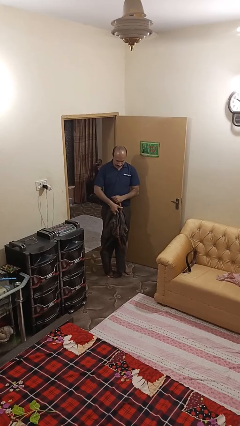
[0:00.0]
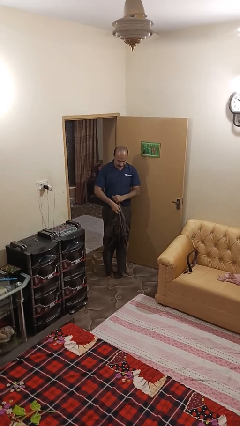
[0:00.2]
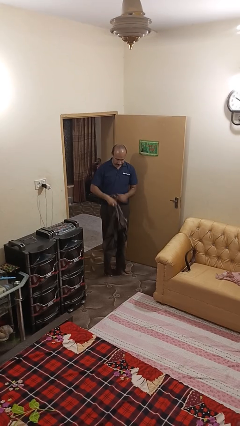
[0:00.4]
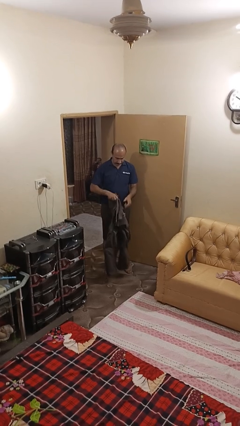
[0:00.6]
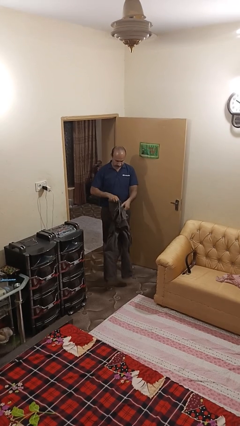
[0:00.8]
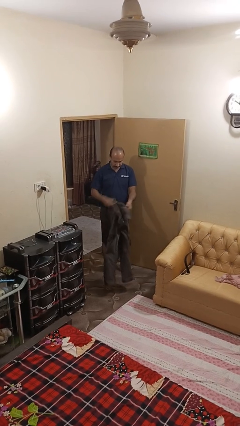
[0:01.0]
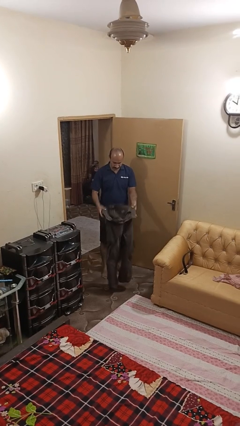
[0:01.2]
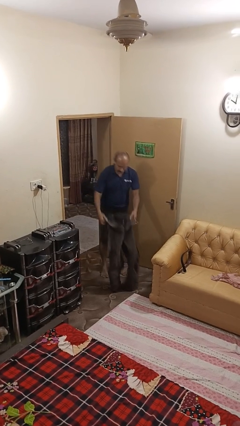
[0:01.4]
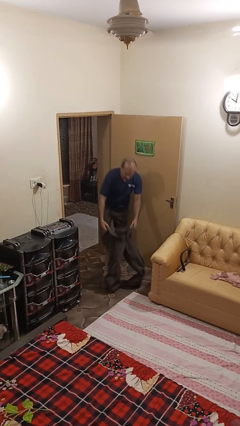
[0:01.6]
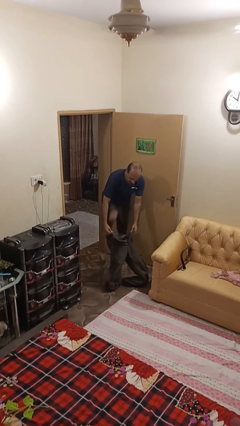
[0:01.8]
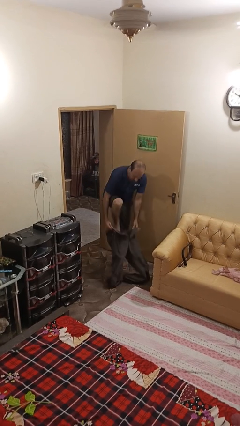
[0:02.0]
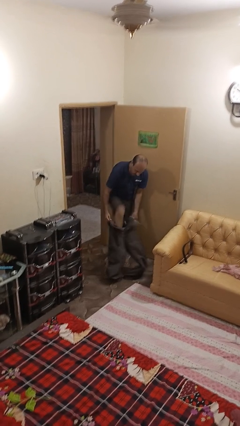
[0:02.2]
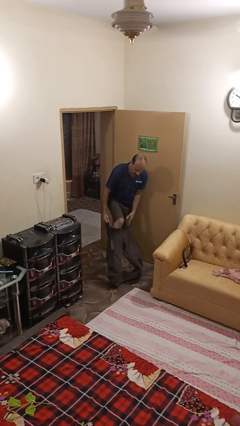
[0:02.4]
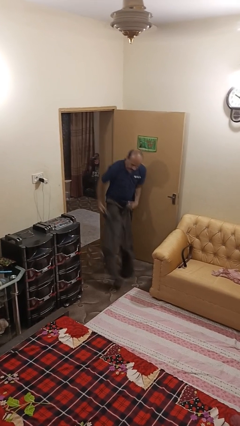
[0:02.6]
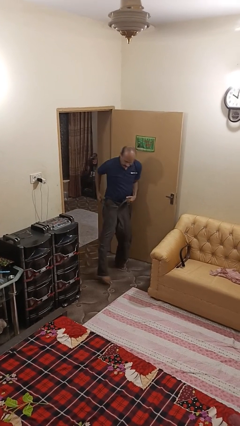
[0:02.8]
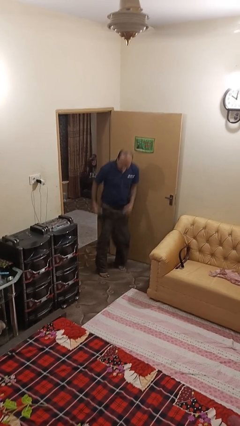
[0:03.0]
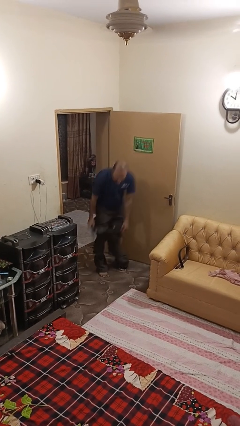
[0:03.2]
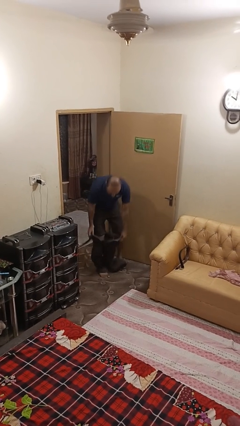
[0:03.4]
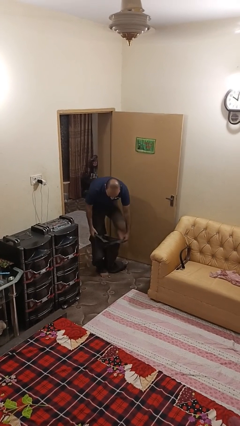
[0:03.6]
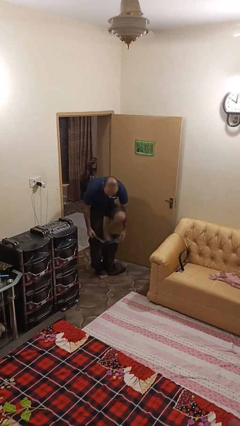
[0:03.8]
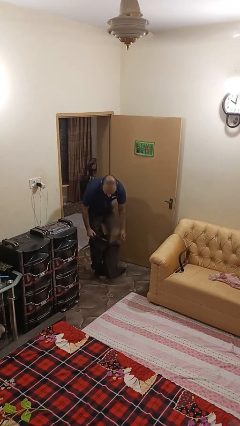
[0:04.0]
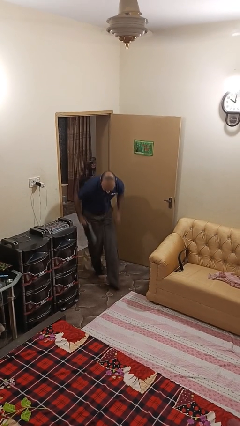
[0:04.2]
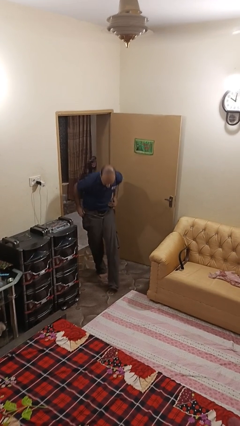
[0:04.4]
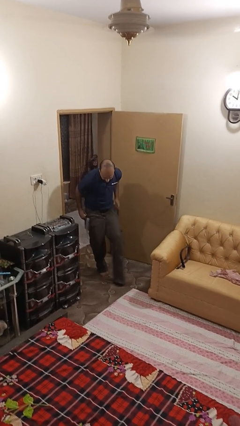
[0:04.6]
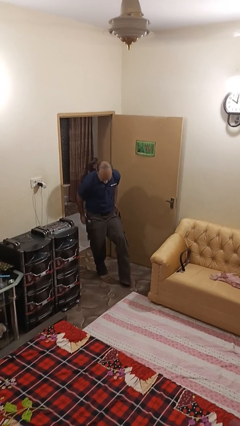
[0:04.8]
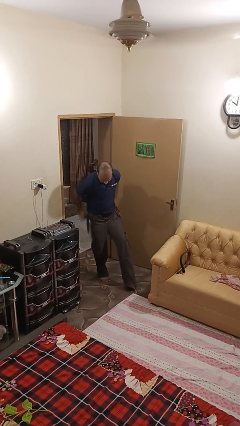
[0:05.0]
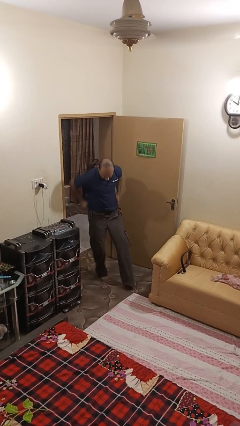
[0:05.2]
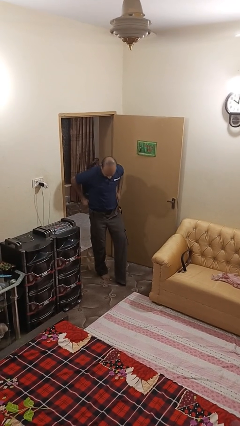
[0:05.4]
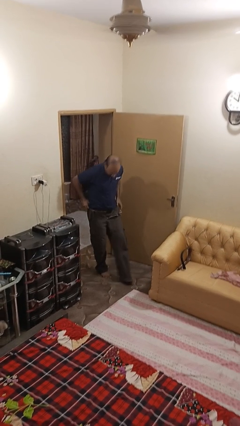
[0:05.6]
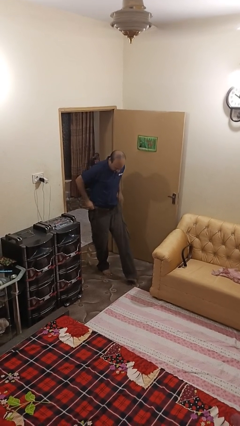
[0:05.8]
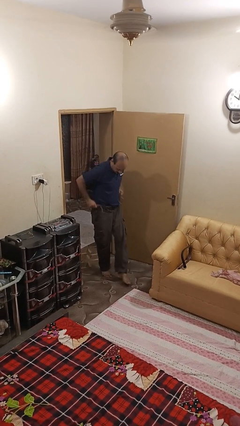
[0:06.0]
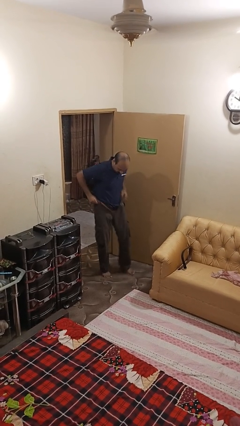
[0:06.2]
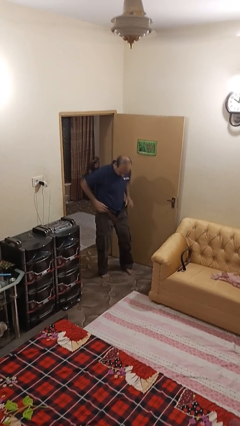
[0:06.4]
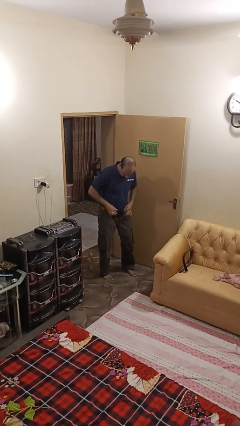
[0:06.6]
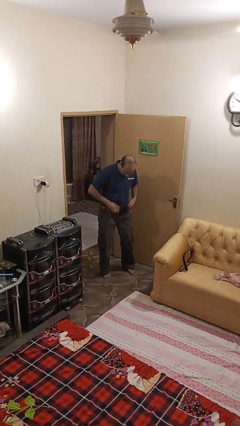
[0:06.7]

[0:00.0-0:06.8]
person puts on pants

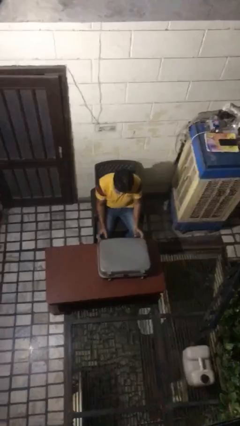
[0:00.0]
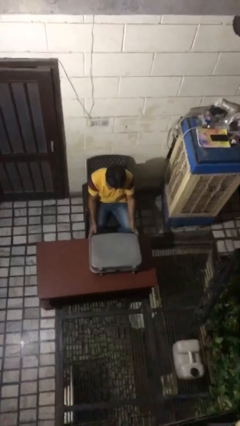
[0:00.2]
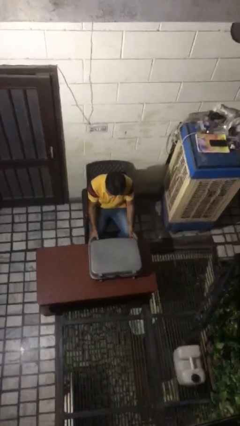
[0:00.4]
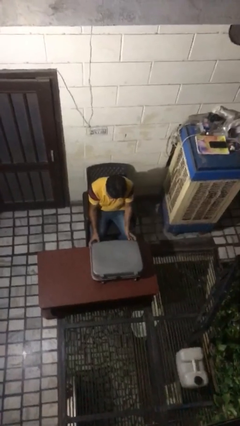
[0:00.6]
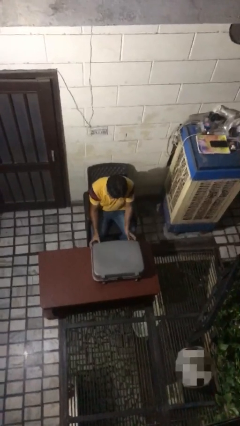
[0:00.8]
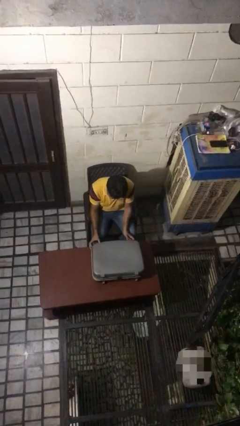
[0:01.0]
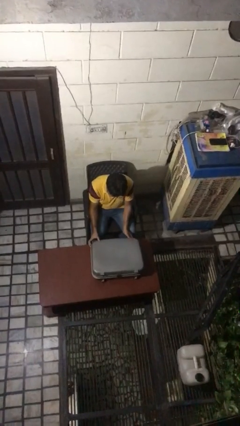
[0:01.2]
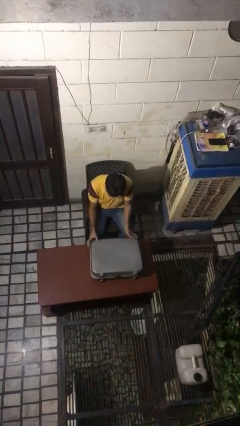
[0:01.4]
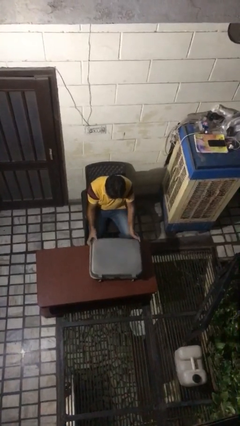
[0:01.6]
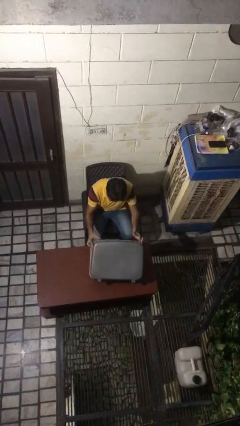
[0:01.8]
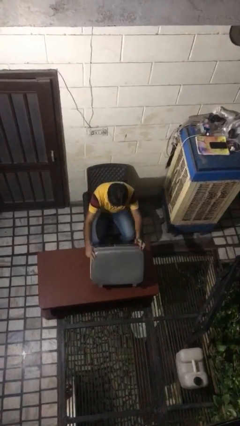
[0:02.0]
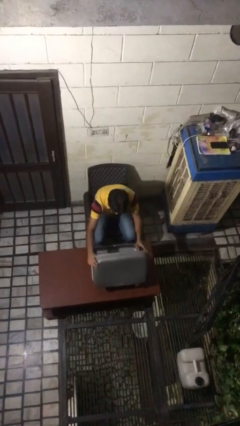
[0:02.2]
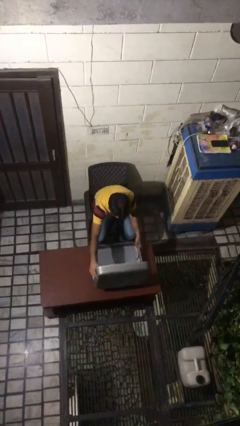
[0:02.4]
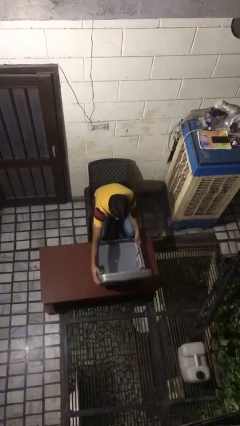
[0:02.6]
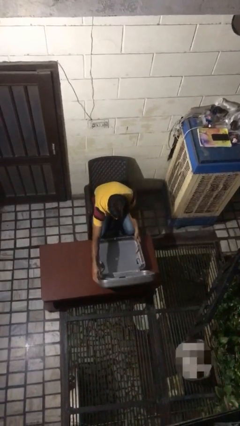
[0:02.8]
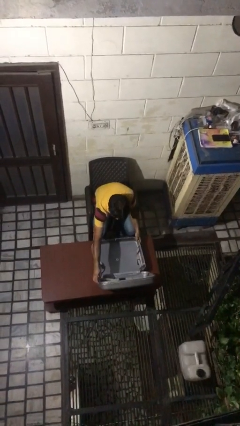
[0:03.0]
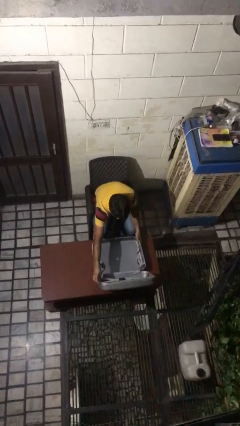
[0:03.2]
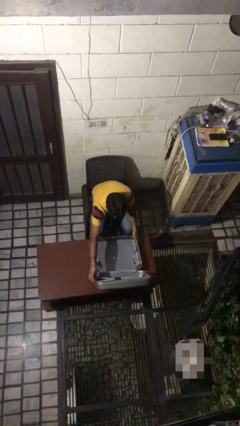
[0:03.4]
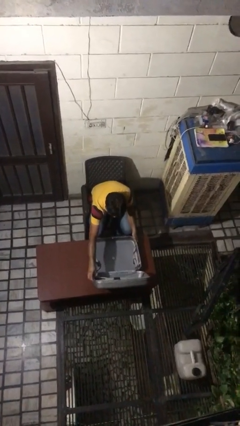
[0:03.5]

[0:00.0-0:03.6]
person opens suitcase

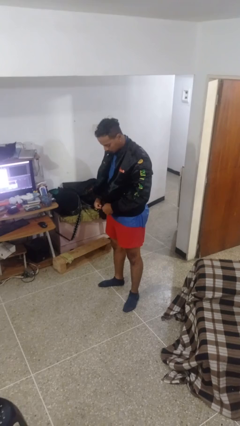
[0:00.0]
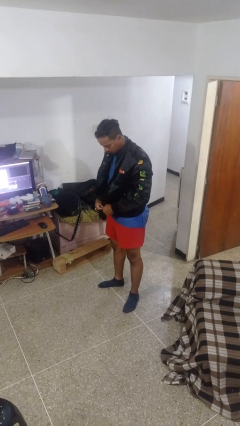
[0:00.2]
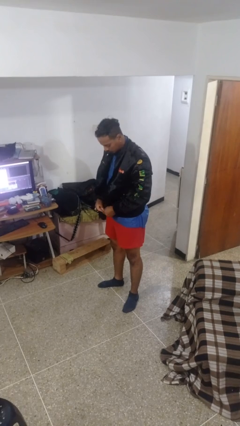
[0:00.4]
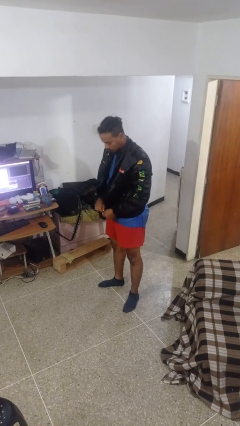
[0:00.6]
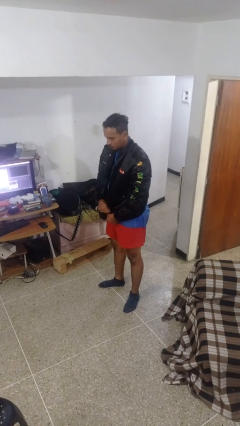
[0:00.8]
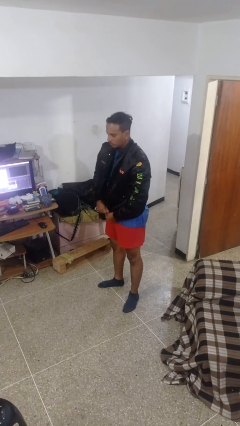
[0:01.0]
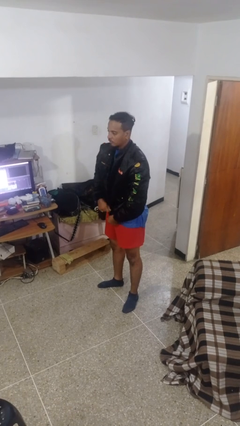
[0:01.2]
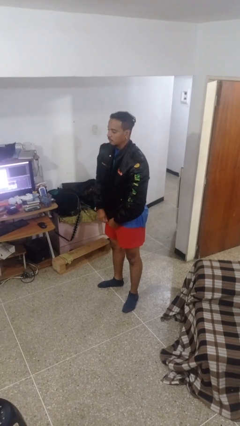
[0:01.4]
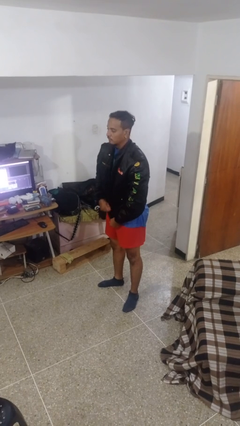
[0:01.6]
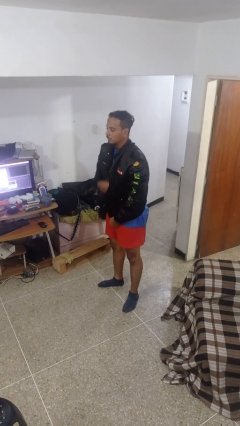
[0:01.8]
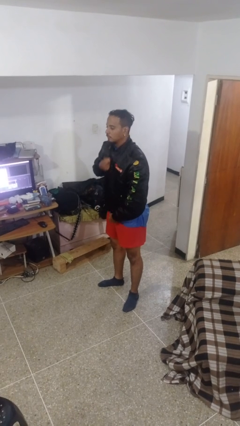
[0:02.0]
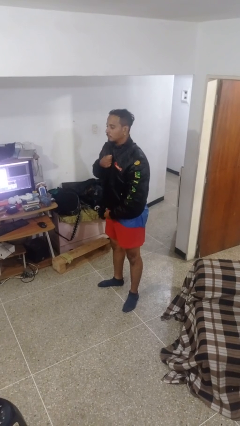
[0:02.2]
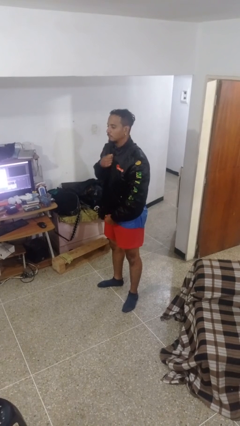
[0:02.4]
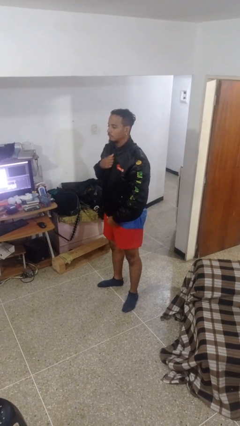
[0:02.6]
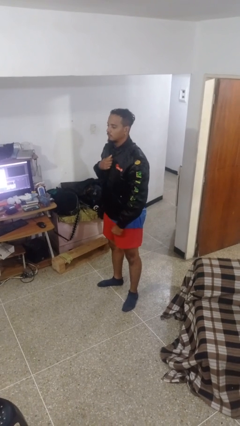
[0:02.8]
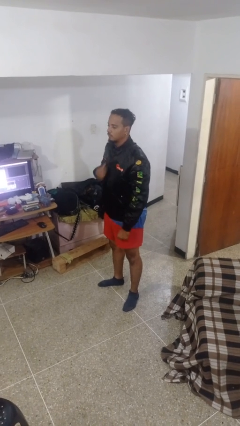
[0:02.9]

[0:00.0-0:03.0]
person zips up jacket

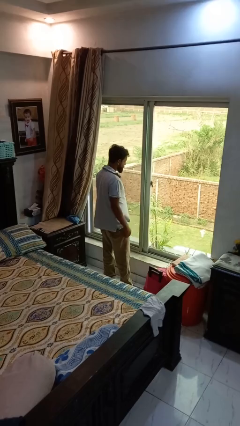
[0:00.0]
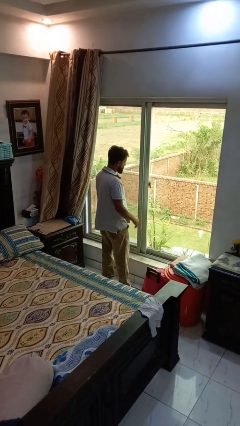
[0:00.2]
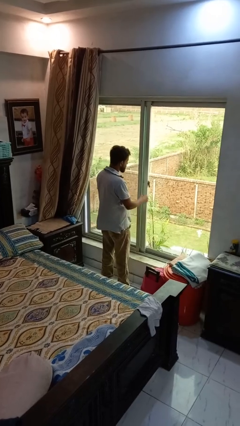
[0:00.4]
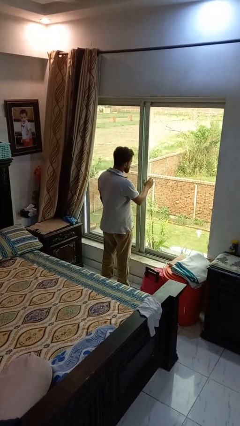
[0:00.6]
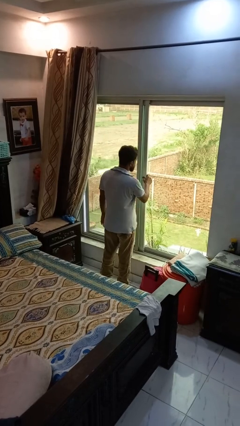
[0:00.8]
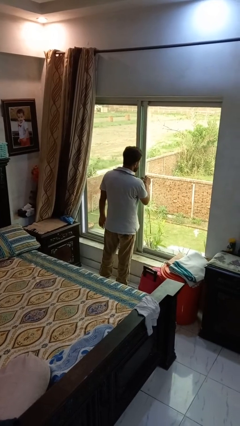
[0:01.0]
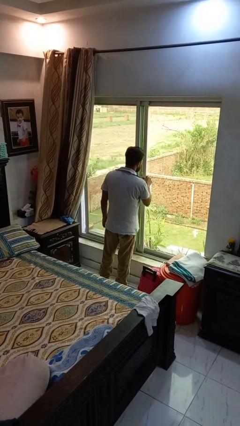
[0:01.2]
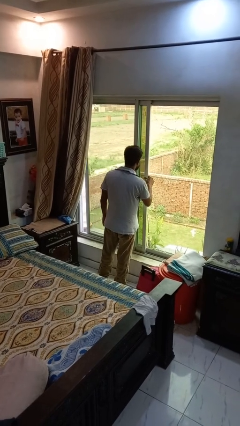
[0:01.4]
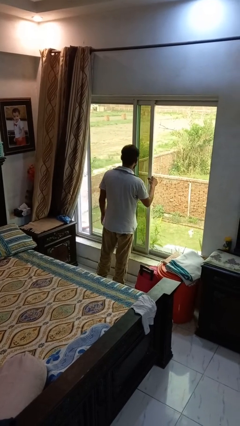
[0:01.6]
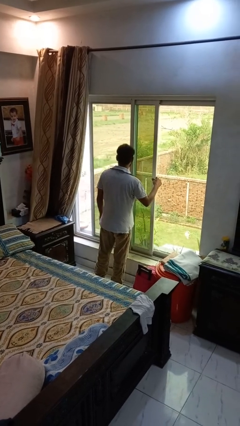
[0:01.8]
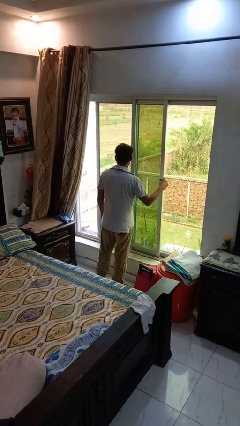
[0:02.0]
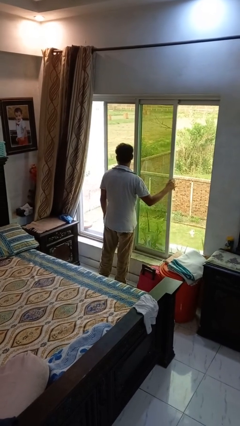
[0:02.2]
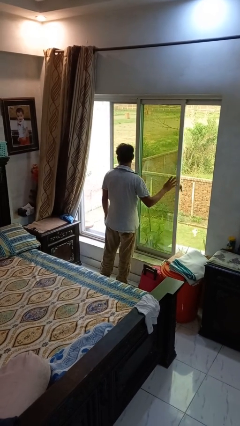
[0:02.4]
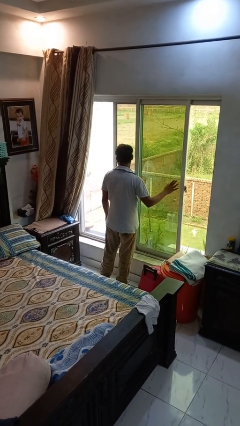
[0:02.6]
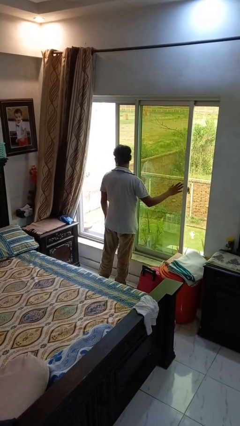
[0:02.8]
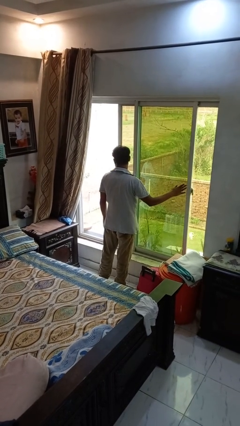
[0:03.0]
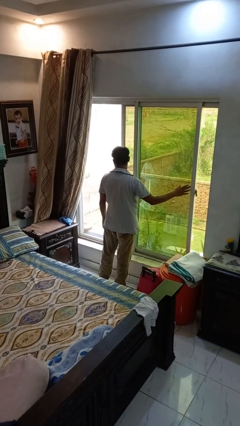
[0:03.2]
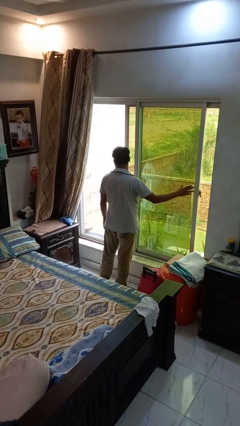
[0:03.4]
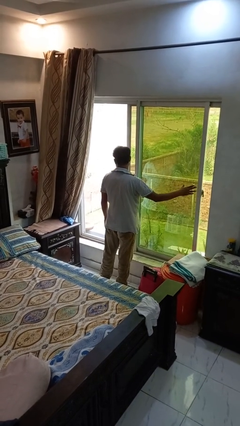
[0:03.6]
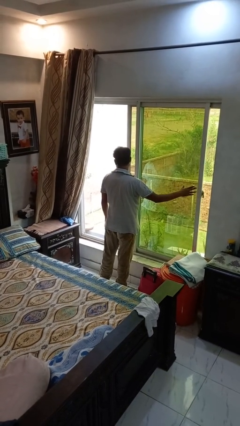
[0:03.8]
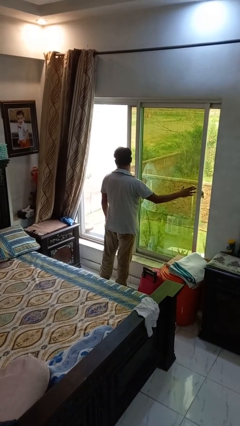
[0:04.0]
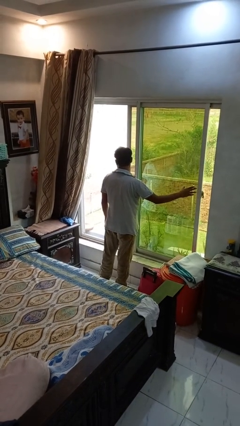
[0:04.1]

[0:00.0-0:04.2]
person opens sliding door
